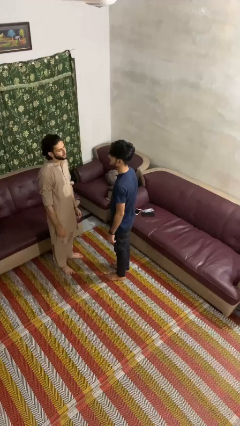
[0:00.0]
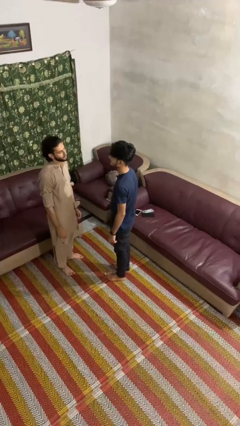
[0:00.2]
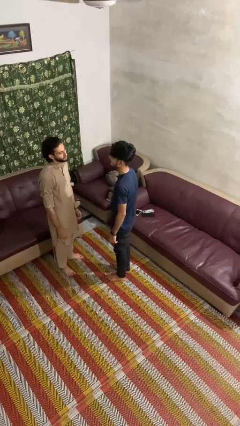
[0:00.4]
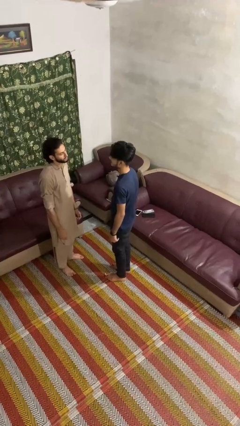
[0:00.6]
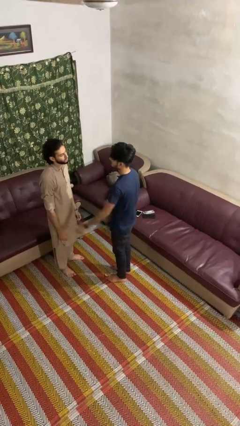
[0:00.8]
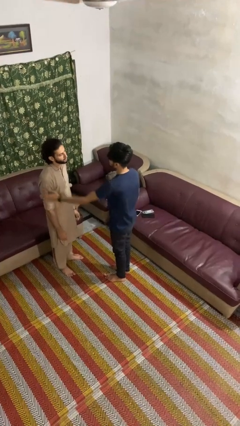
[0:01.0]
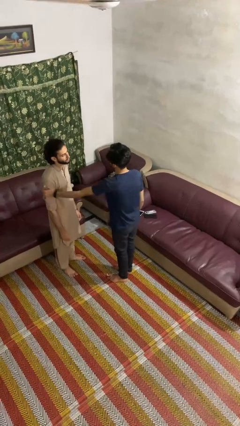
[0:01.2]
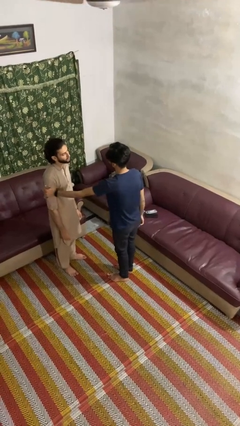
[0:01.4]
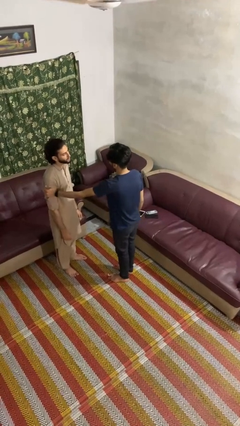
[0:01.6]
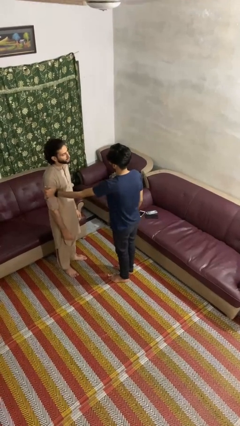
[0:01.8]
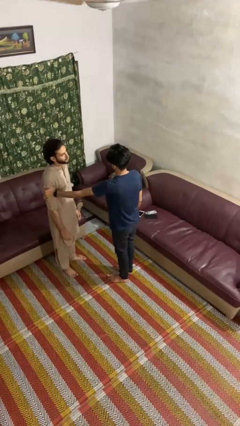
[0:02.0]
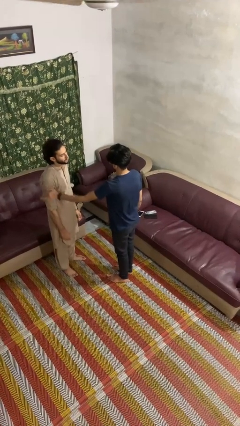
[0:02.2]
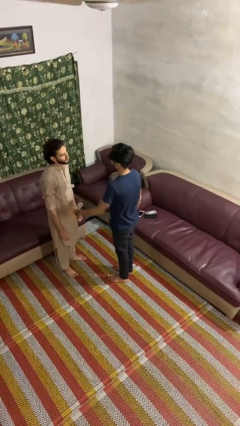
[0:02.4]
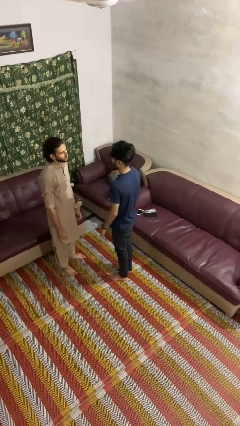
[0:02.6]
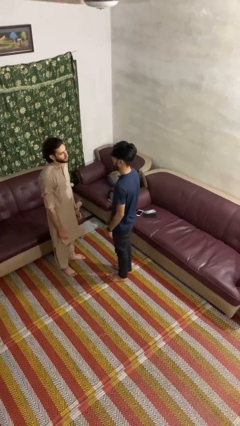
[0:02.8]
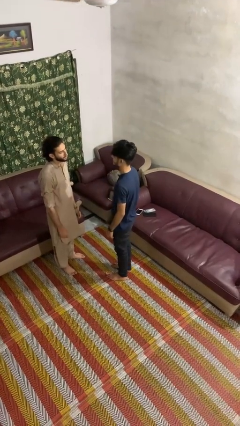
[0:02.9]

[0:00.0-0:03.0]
person grabs person by bicep

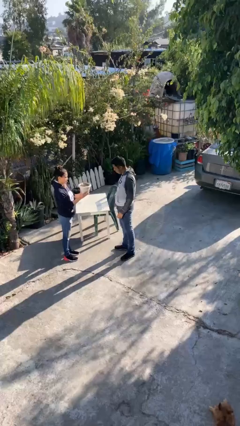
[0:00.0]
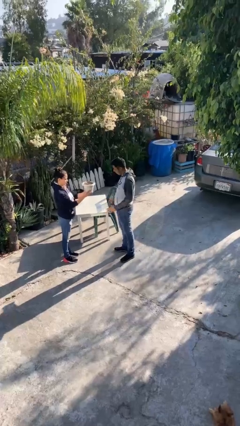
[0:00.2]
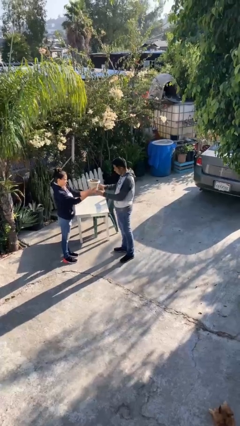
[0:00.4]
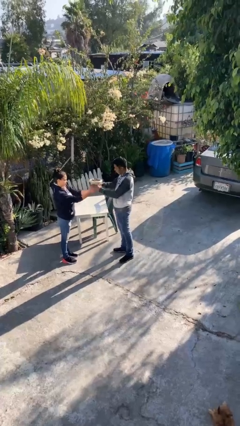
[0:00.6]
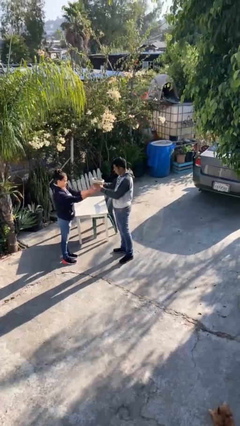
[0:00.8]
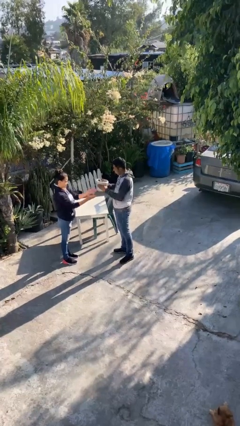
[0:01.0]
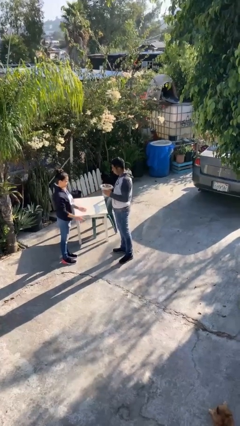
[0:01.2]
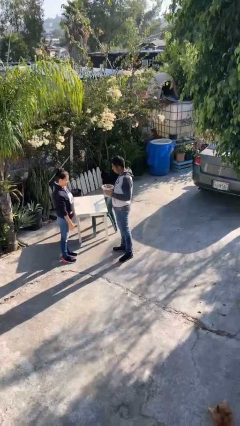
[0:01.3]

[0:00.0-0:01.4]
person transfers object to person

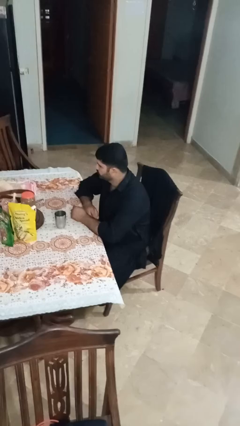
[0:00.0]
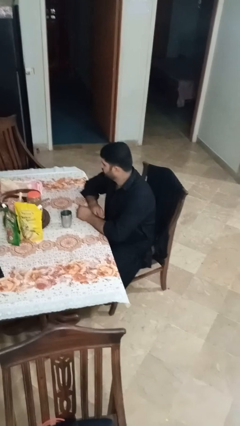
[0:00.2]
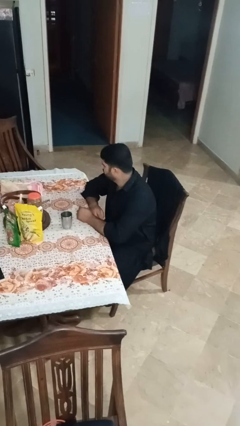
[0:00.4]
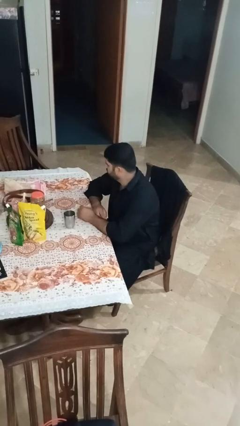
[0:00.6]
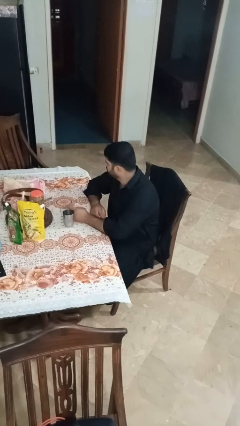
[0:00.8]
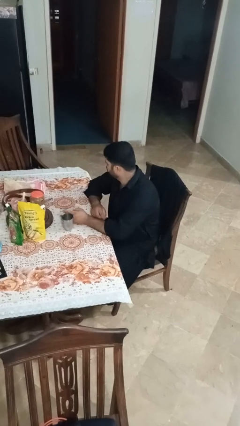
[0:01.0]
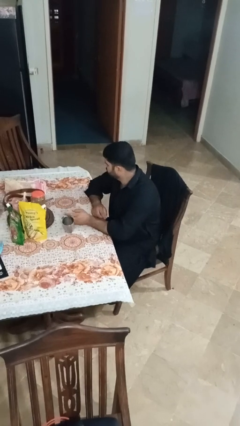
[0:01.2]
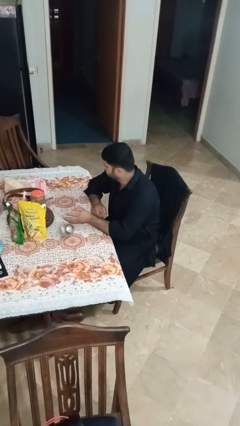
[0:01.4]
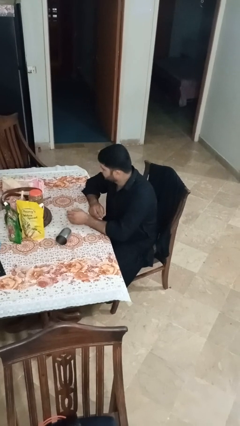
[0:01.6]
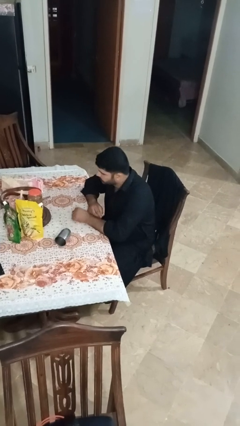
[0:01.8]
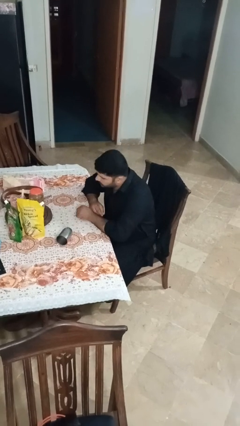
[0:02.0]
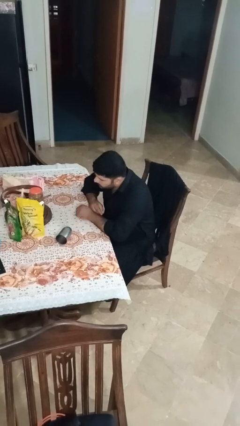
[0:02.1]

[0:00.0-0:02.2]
person knocks over glass

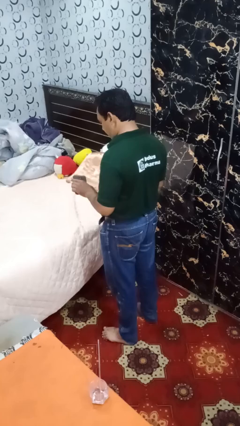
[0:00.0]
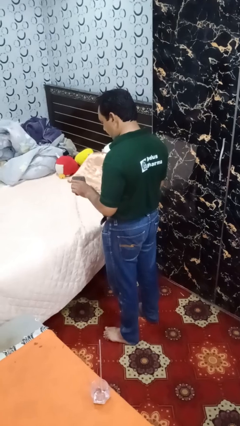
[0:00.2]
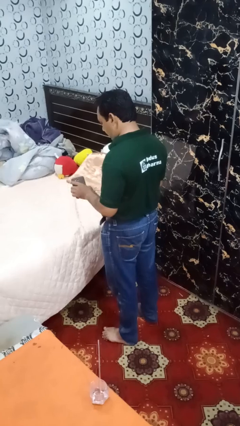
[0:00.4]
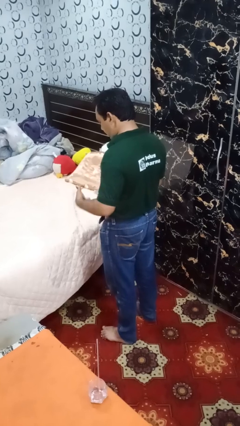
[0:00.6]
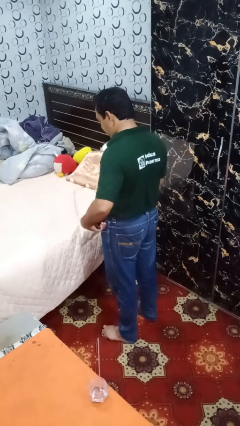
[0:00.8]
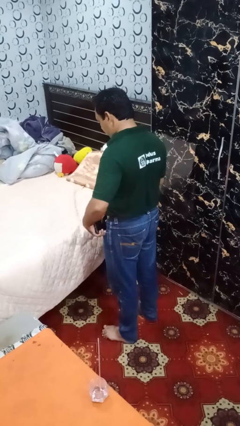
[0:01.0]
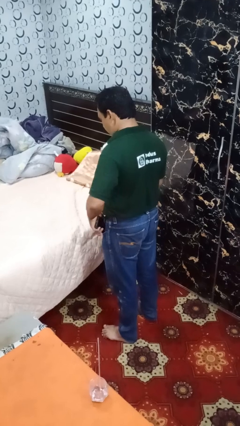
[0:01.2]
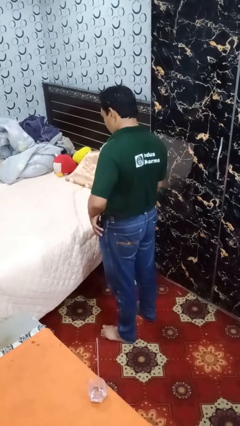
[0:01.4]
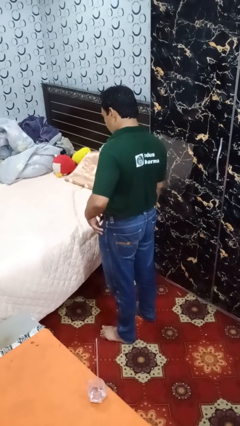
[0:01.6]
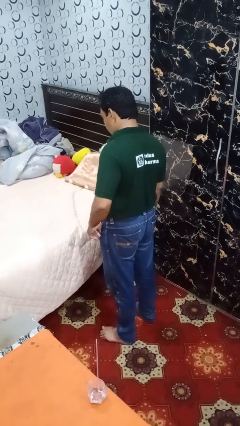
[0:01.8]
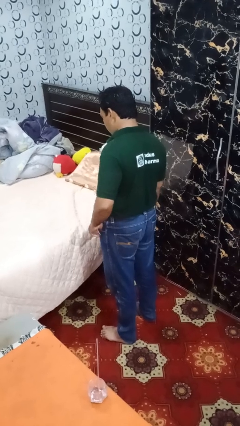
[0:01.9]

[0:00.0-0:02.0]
person puts phone into pocket

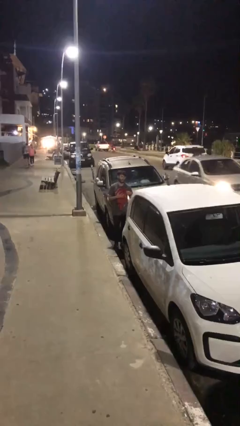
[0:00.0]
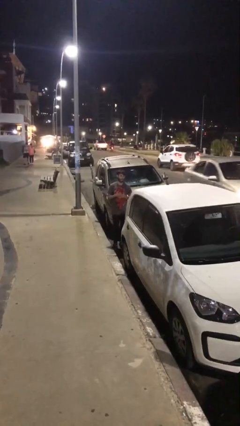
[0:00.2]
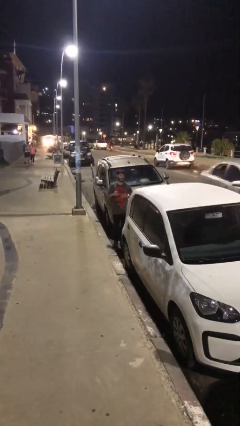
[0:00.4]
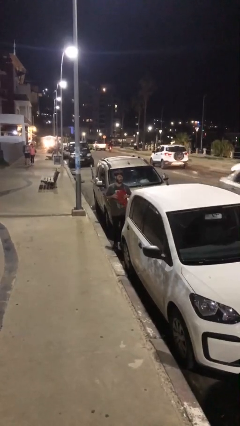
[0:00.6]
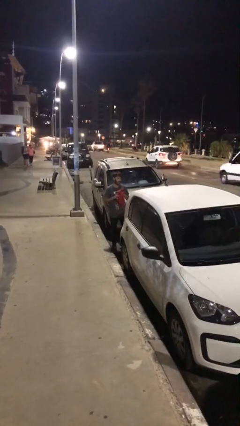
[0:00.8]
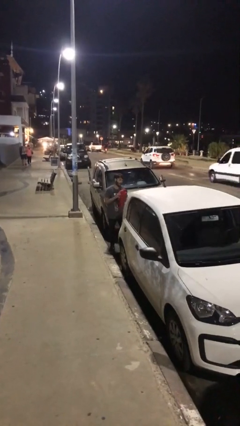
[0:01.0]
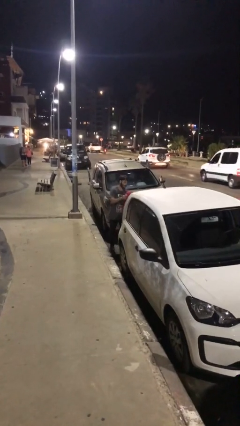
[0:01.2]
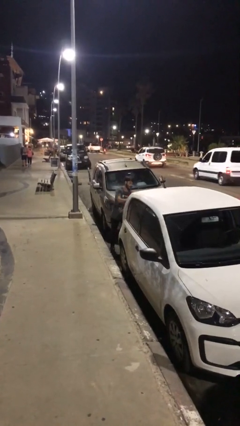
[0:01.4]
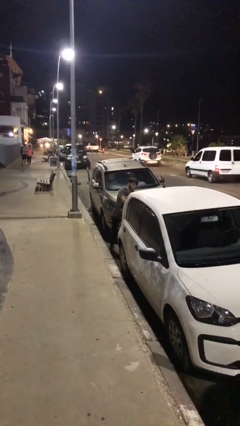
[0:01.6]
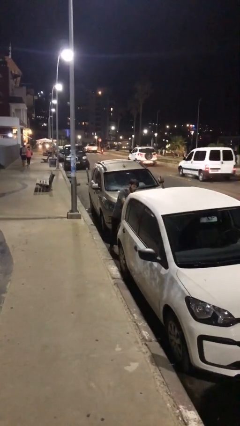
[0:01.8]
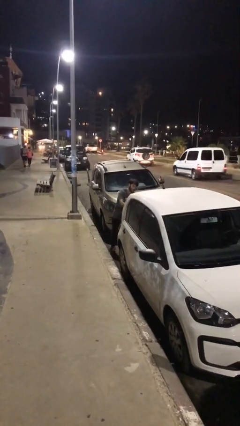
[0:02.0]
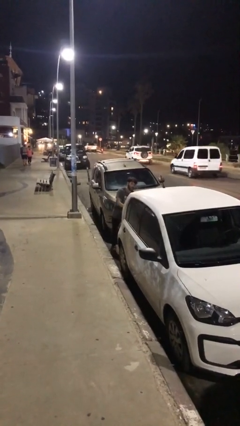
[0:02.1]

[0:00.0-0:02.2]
person loads car

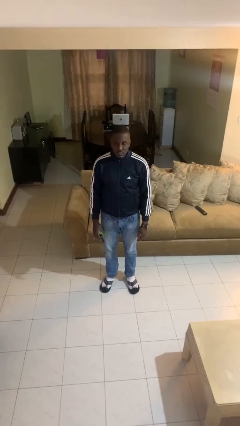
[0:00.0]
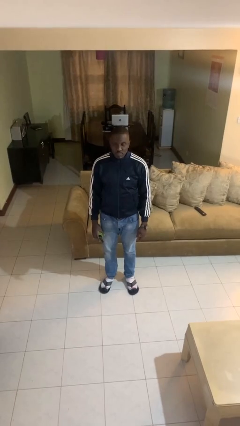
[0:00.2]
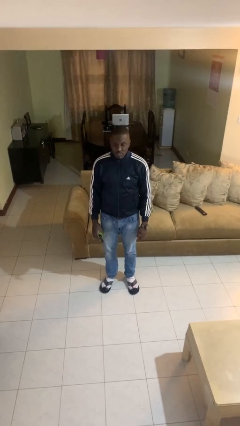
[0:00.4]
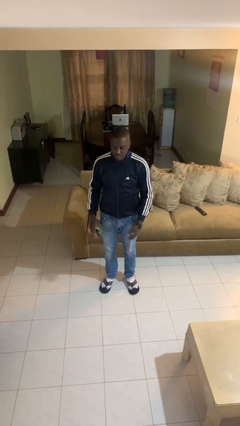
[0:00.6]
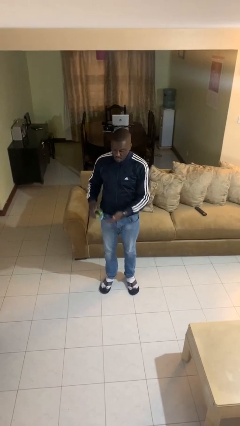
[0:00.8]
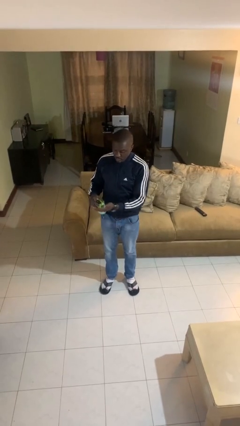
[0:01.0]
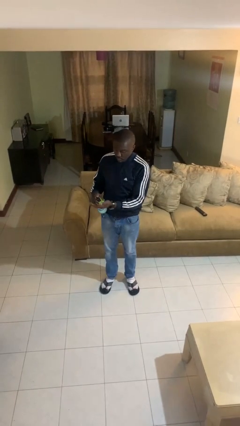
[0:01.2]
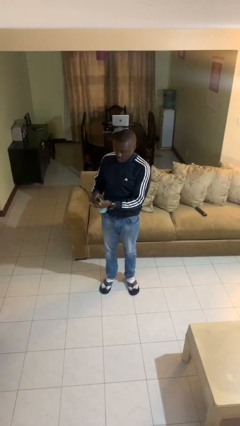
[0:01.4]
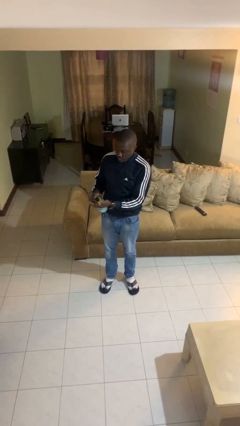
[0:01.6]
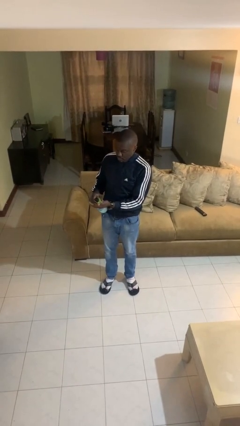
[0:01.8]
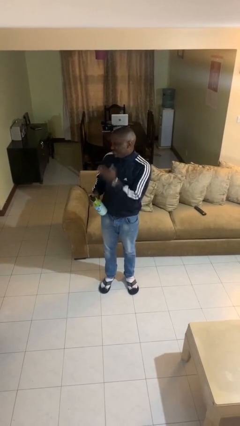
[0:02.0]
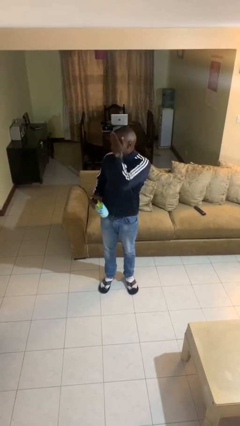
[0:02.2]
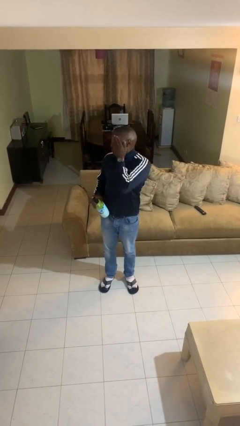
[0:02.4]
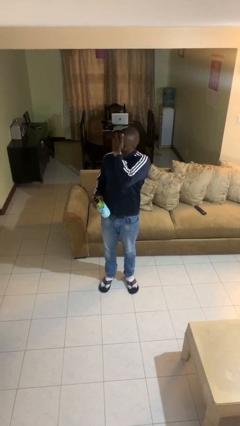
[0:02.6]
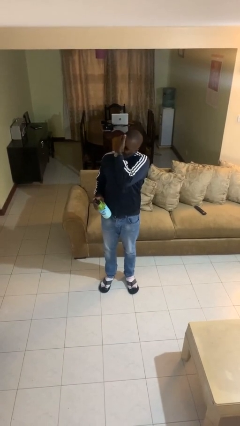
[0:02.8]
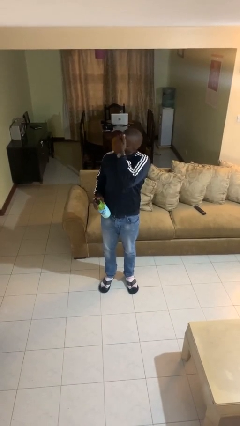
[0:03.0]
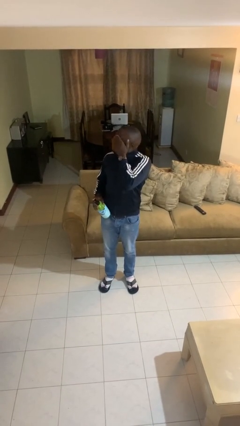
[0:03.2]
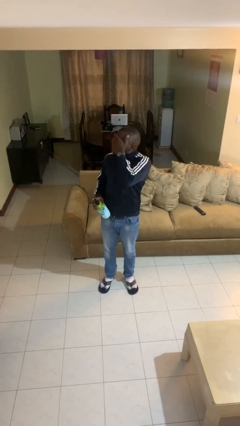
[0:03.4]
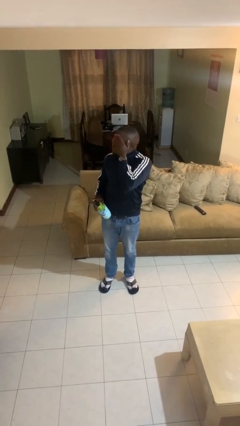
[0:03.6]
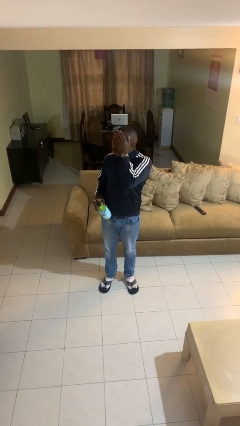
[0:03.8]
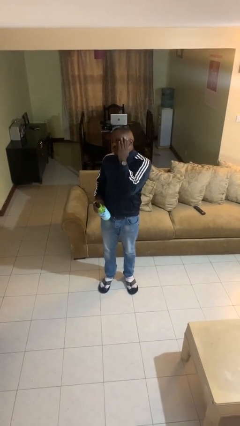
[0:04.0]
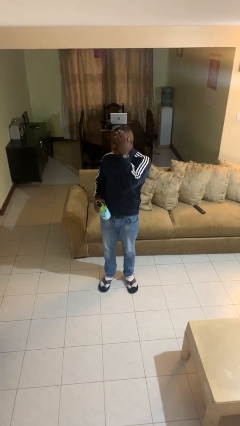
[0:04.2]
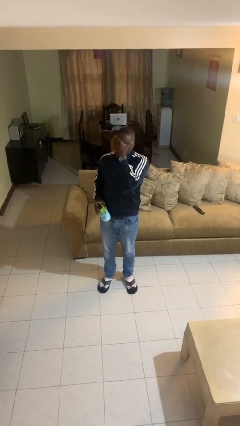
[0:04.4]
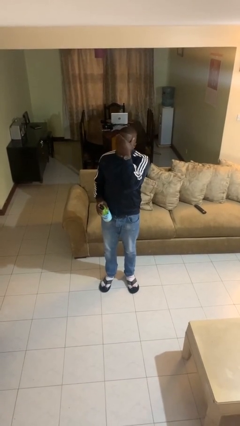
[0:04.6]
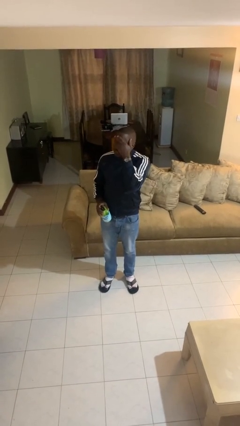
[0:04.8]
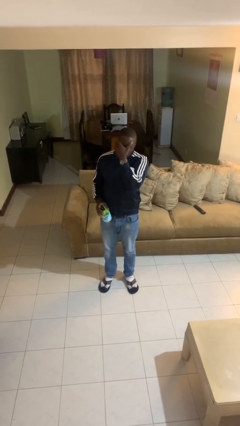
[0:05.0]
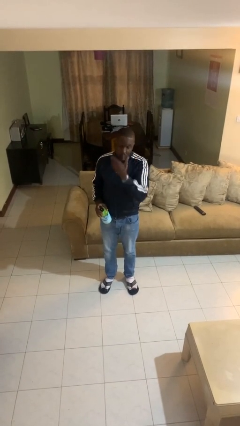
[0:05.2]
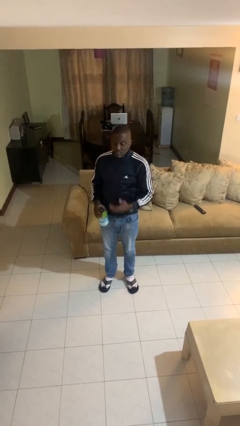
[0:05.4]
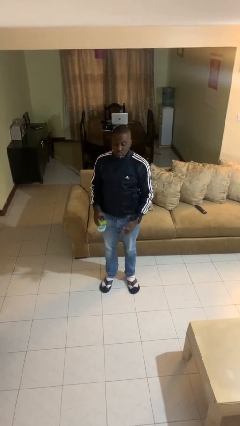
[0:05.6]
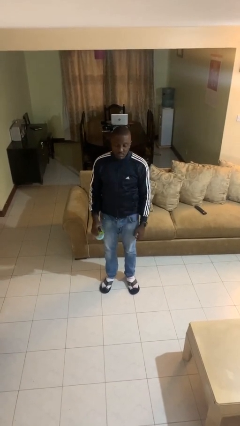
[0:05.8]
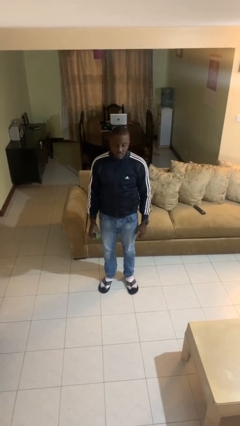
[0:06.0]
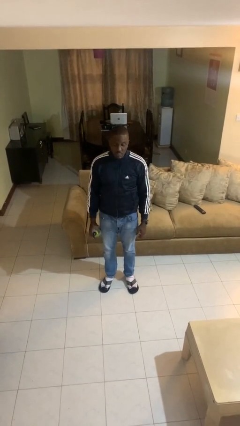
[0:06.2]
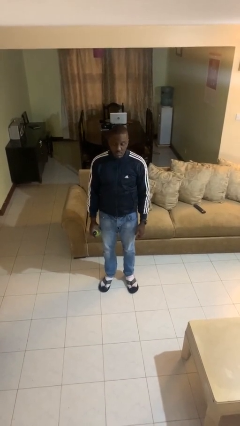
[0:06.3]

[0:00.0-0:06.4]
person applies facial moisturizer
